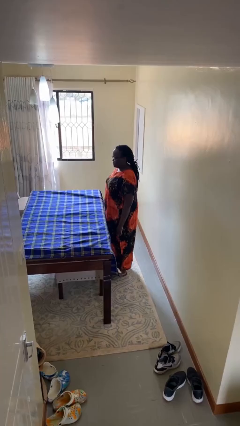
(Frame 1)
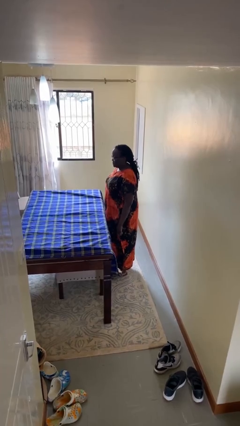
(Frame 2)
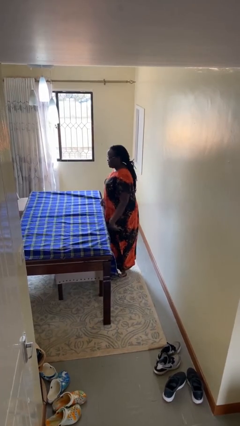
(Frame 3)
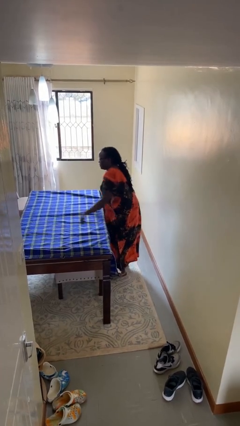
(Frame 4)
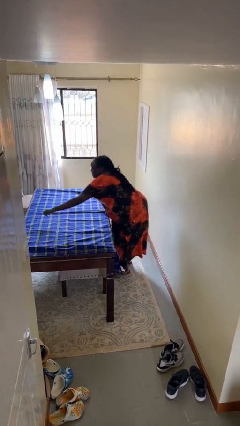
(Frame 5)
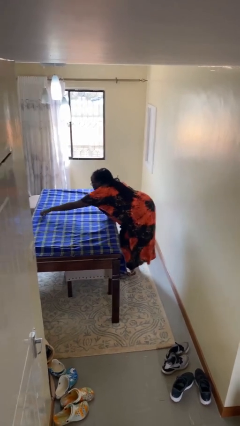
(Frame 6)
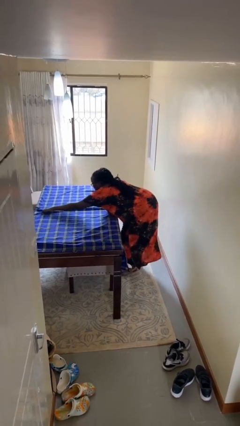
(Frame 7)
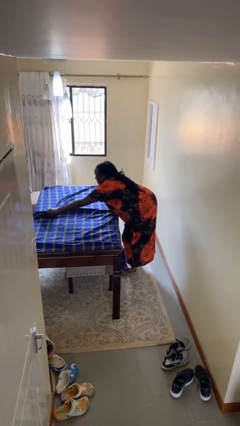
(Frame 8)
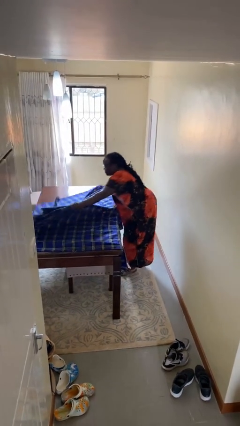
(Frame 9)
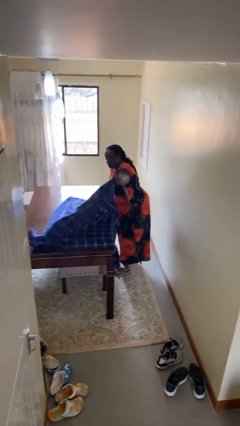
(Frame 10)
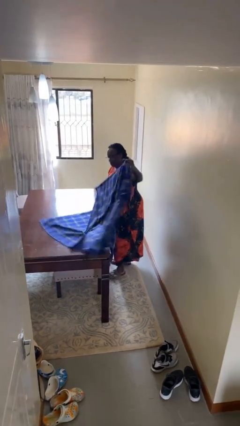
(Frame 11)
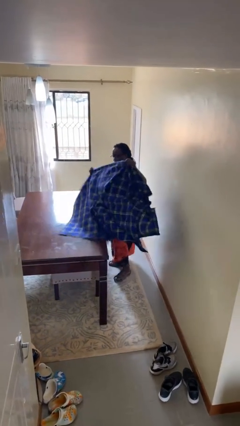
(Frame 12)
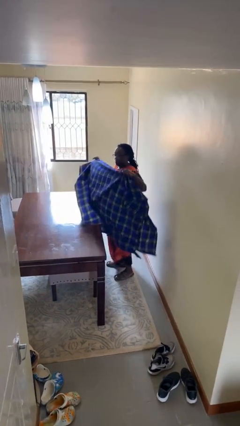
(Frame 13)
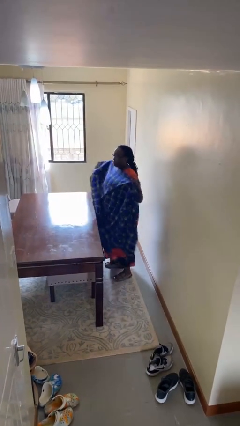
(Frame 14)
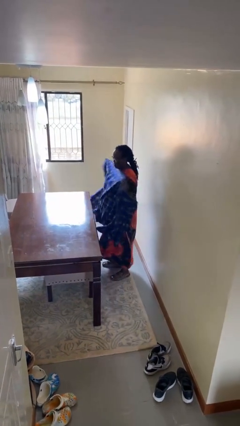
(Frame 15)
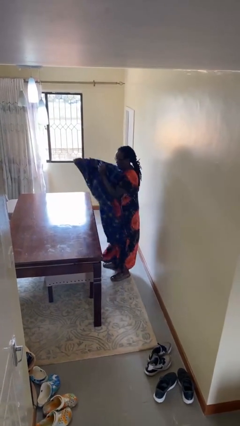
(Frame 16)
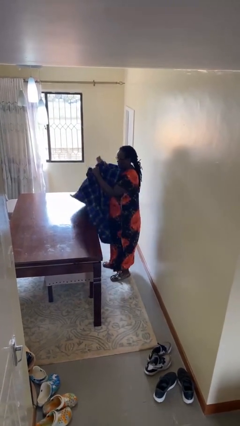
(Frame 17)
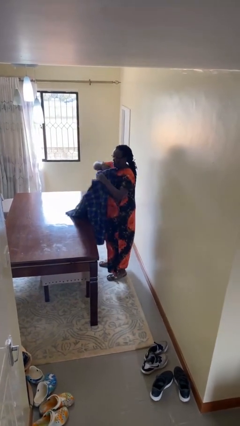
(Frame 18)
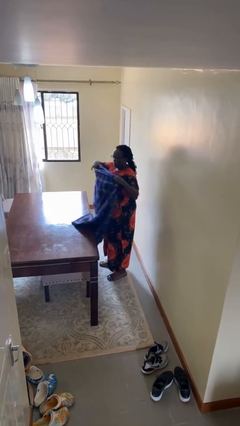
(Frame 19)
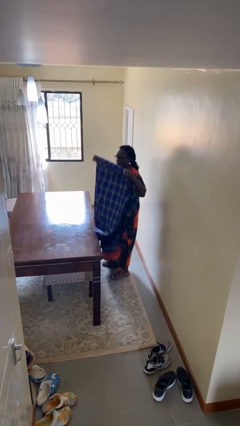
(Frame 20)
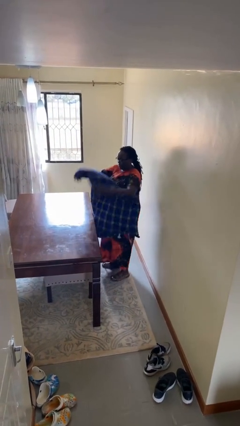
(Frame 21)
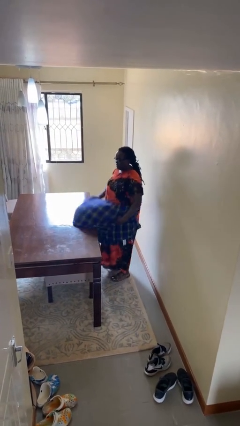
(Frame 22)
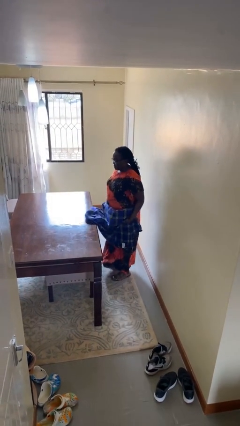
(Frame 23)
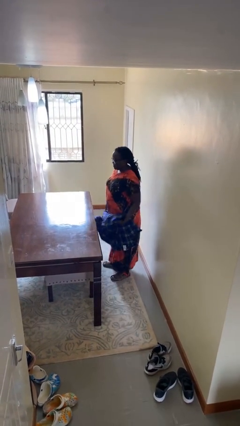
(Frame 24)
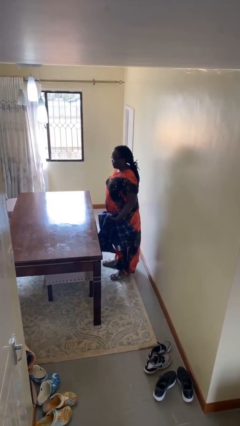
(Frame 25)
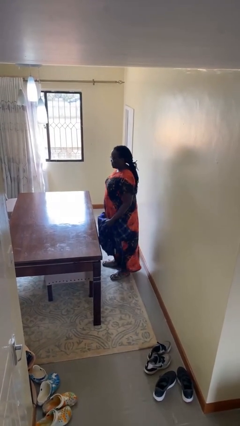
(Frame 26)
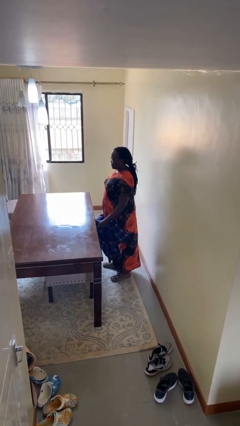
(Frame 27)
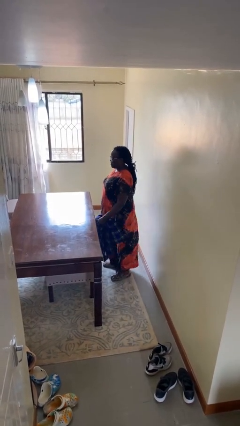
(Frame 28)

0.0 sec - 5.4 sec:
person folds tablecloth

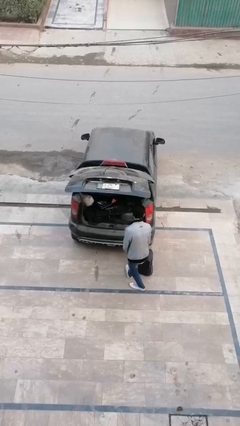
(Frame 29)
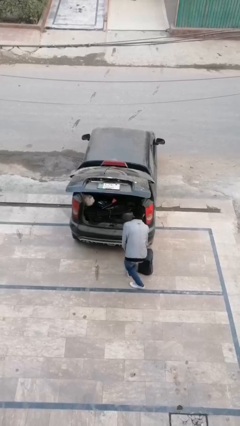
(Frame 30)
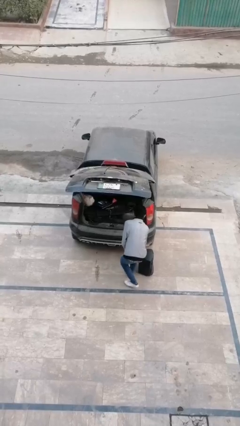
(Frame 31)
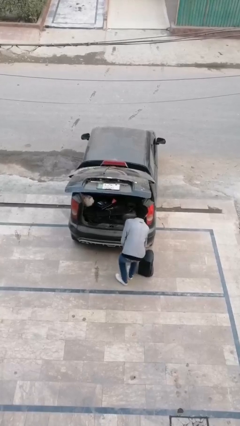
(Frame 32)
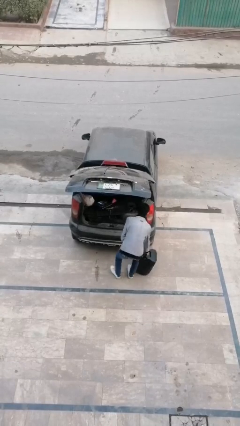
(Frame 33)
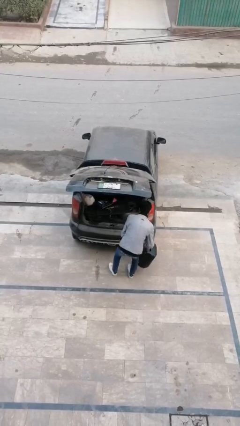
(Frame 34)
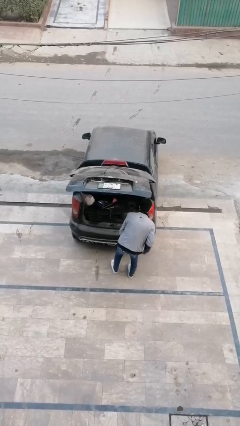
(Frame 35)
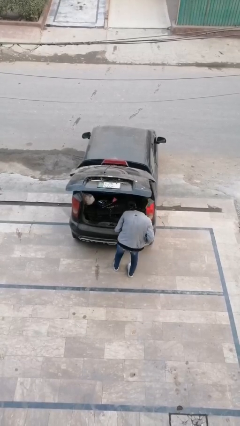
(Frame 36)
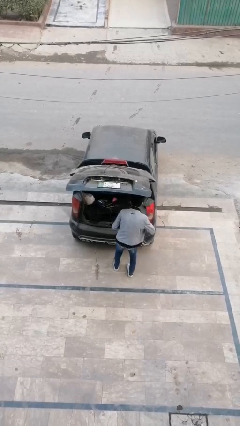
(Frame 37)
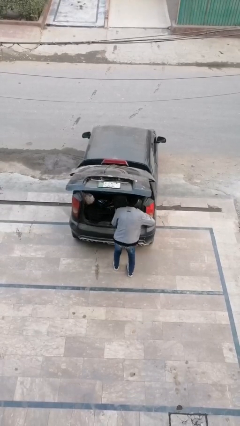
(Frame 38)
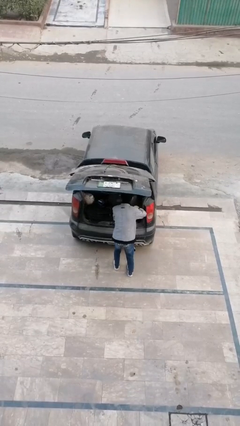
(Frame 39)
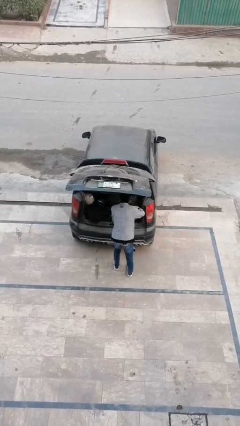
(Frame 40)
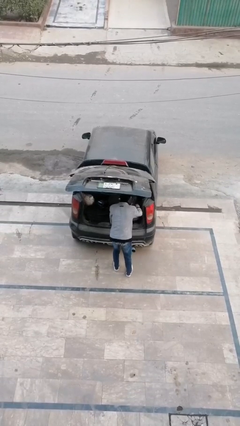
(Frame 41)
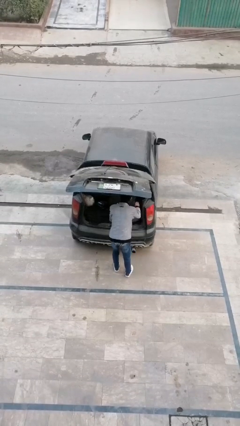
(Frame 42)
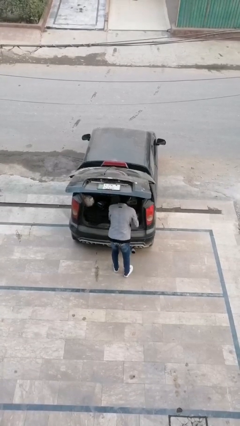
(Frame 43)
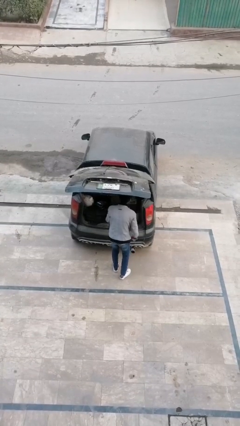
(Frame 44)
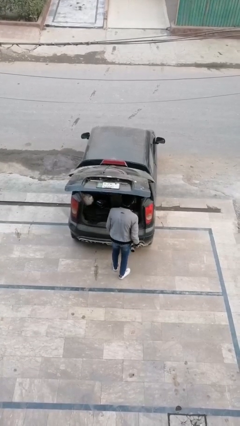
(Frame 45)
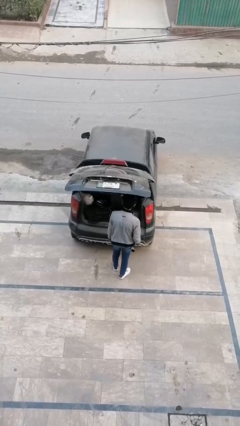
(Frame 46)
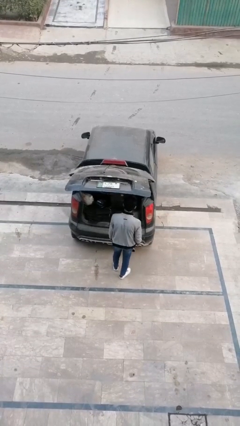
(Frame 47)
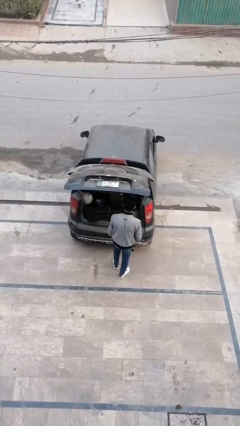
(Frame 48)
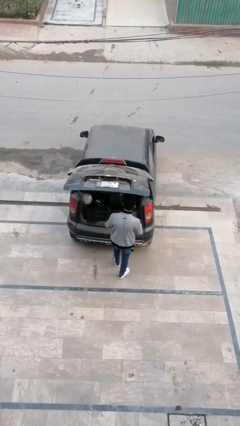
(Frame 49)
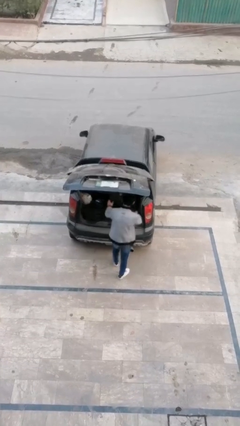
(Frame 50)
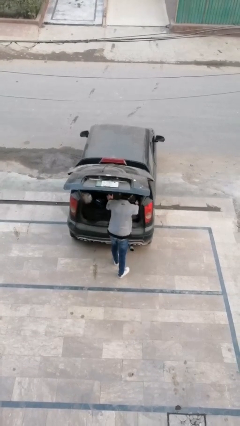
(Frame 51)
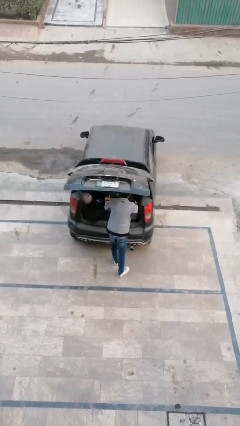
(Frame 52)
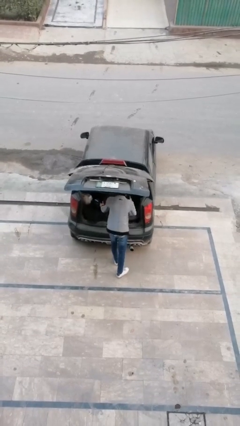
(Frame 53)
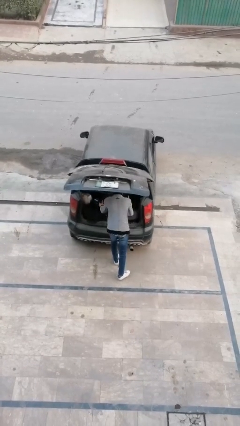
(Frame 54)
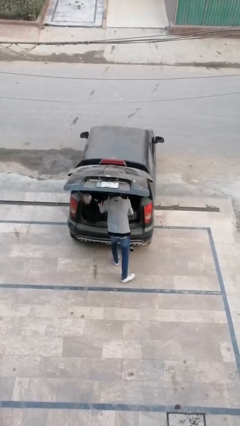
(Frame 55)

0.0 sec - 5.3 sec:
person loads car

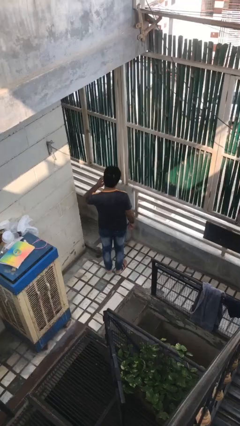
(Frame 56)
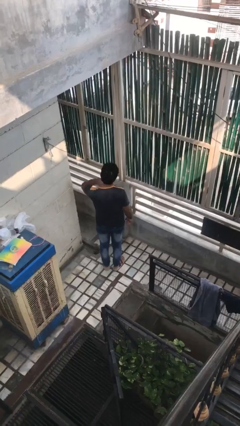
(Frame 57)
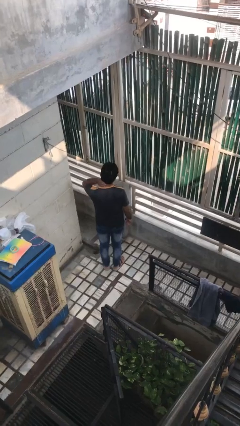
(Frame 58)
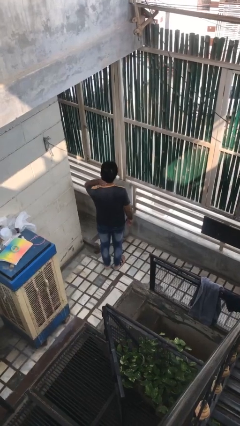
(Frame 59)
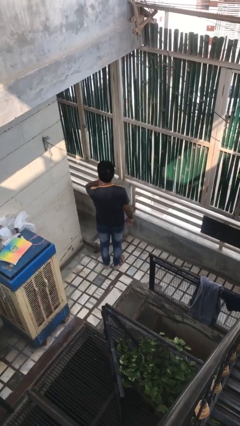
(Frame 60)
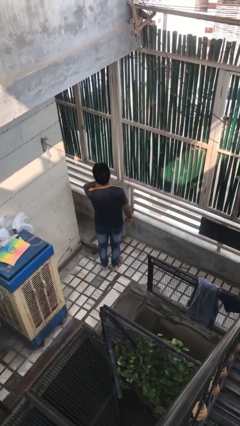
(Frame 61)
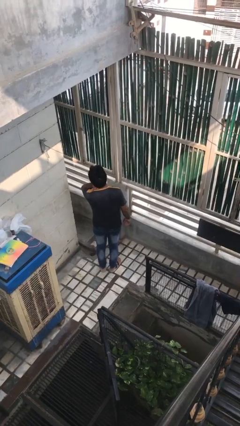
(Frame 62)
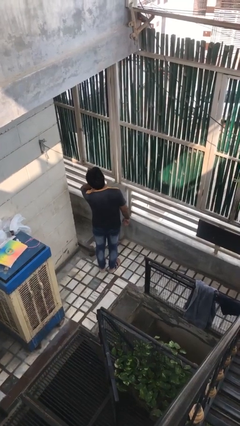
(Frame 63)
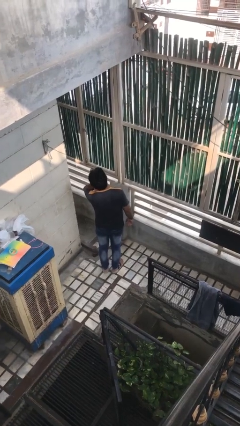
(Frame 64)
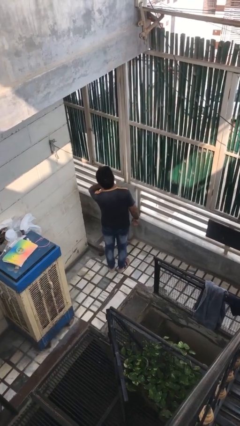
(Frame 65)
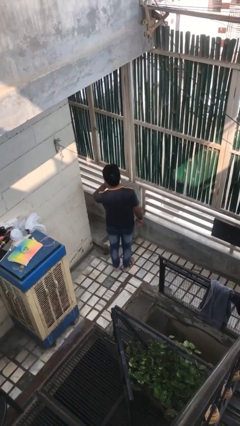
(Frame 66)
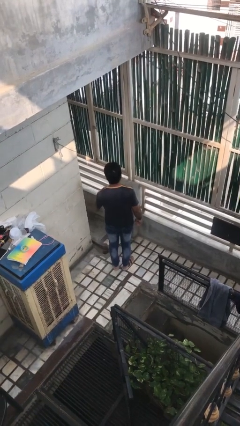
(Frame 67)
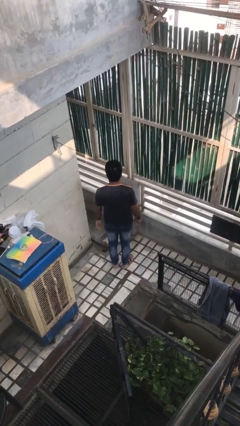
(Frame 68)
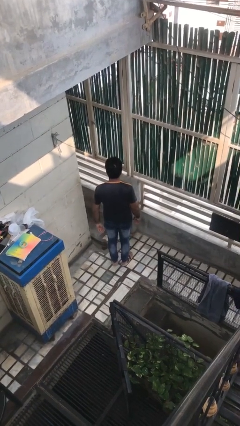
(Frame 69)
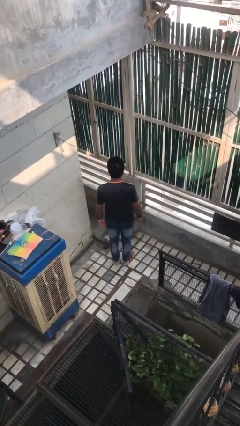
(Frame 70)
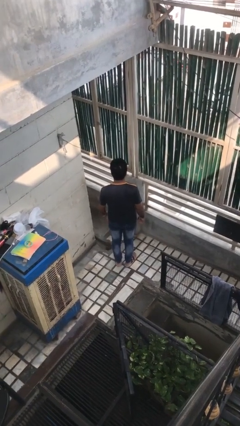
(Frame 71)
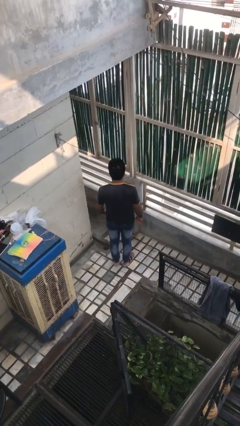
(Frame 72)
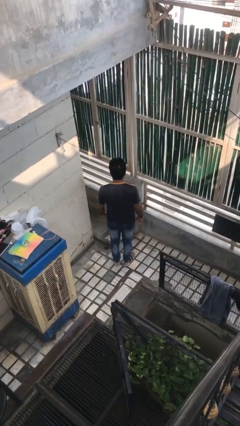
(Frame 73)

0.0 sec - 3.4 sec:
person rubs neck

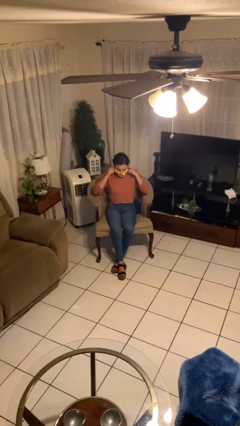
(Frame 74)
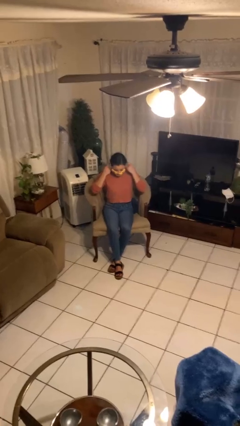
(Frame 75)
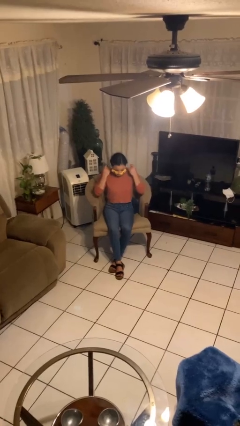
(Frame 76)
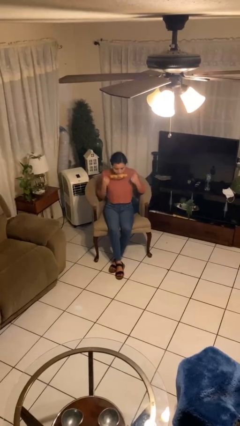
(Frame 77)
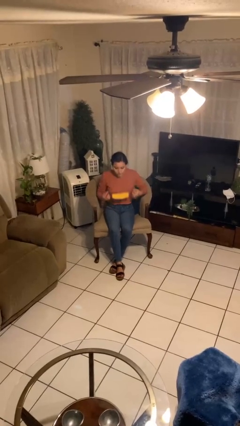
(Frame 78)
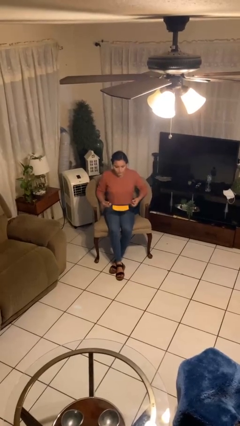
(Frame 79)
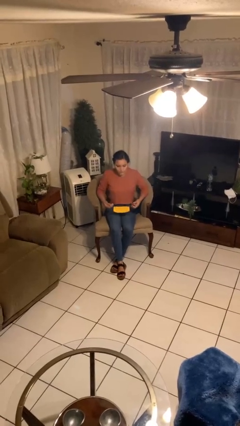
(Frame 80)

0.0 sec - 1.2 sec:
person takes off facemask

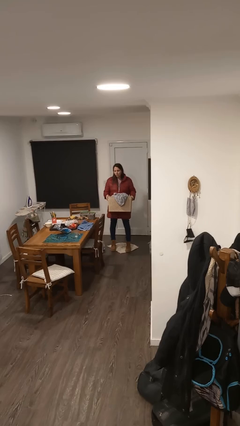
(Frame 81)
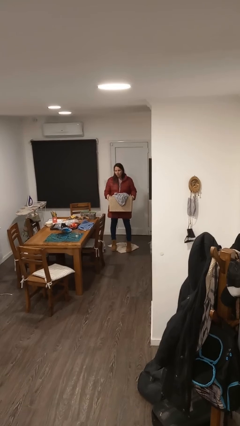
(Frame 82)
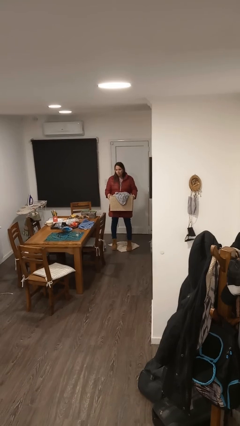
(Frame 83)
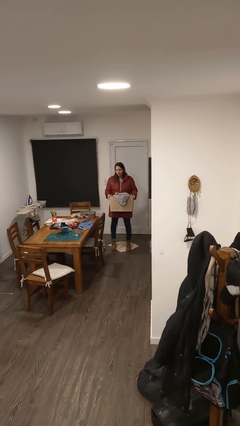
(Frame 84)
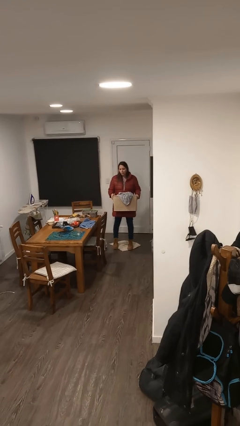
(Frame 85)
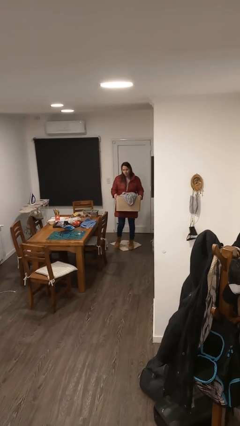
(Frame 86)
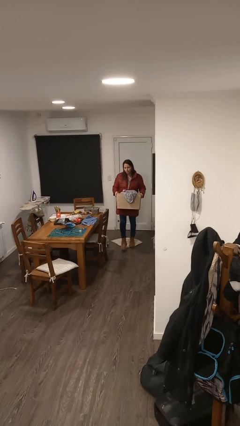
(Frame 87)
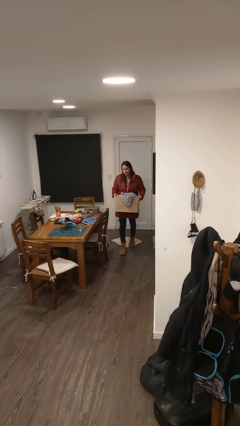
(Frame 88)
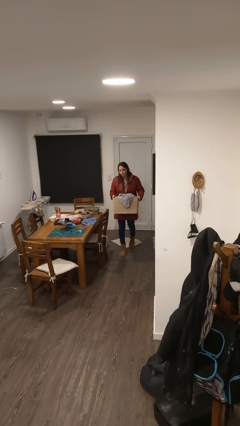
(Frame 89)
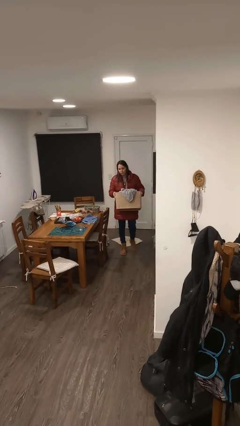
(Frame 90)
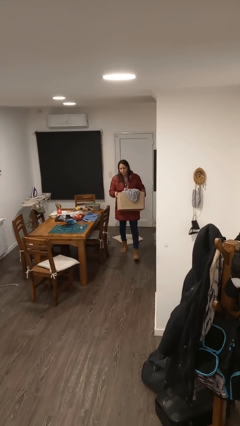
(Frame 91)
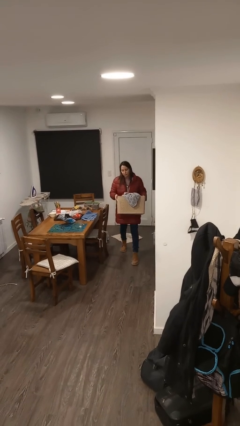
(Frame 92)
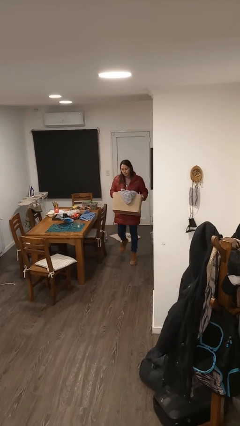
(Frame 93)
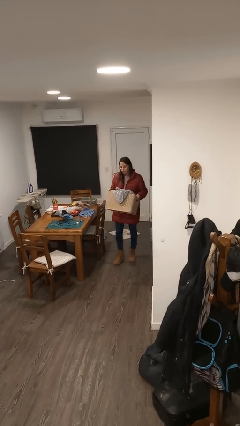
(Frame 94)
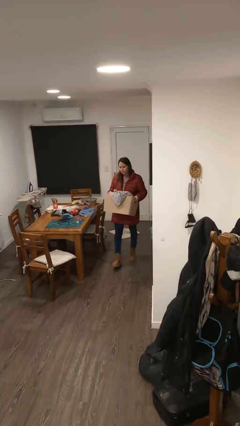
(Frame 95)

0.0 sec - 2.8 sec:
person carries laundry basket
